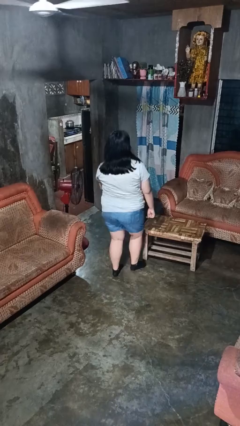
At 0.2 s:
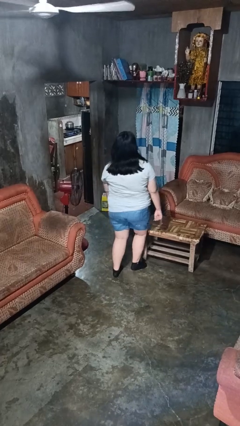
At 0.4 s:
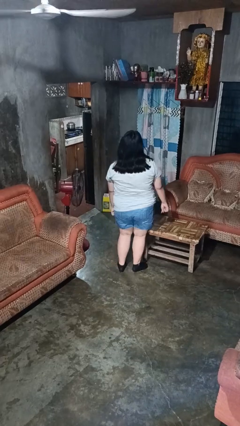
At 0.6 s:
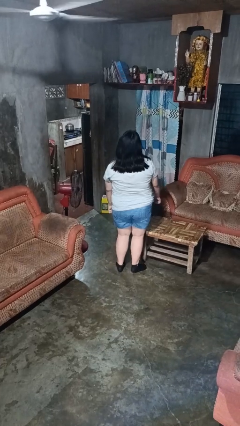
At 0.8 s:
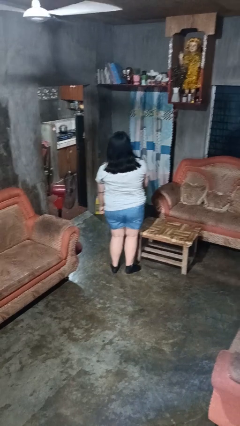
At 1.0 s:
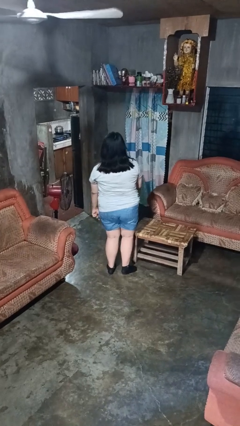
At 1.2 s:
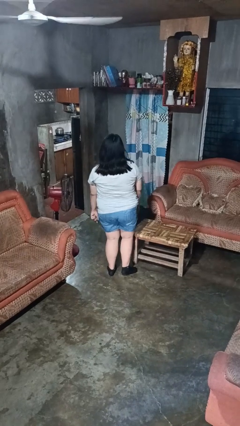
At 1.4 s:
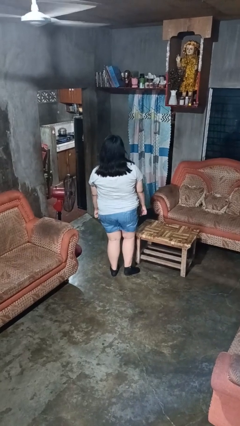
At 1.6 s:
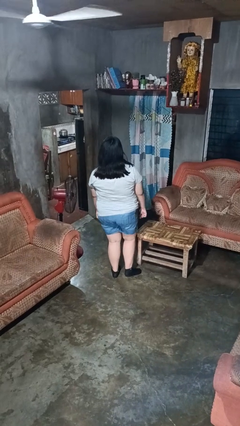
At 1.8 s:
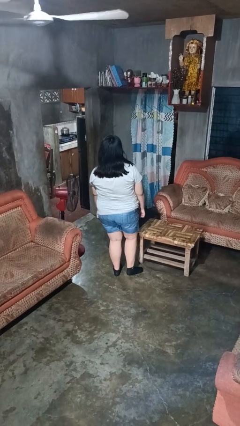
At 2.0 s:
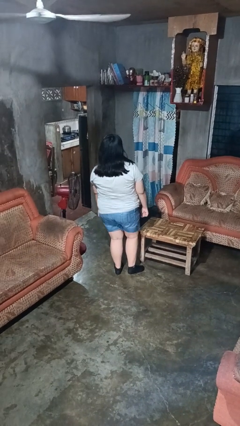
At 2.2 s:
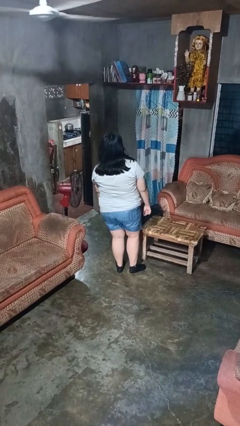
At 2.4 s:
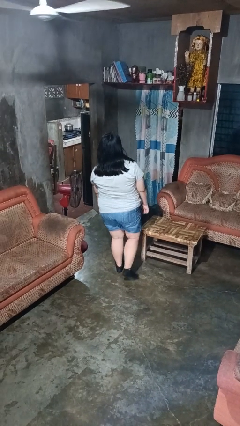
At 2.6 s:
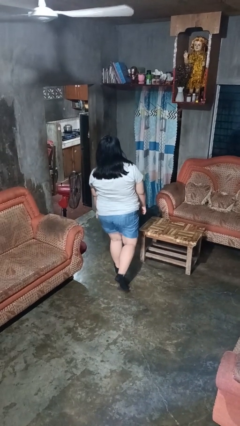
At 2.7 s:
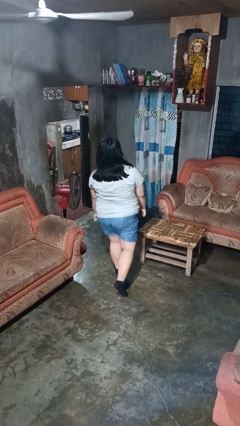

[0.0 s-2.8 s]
person bumps into table

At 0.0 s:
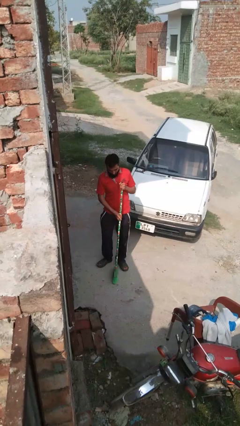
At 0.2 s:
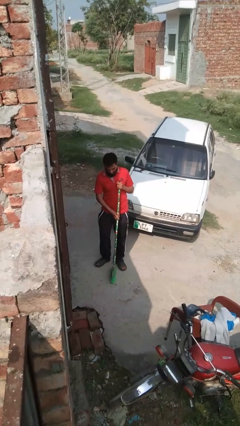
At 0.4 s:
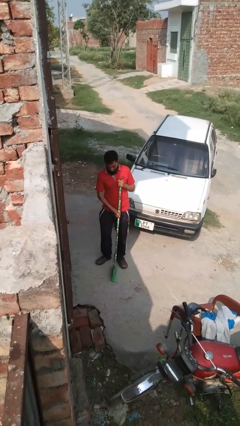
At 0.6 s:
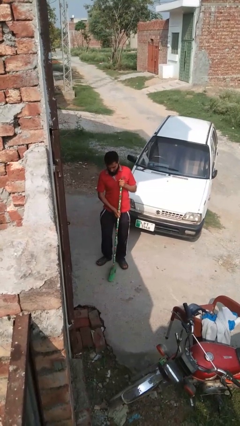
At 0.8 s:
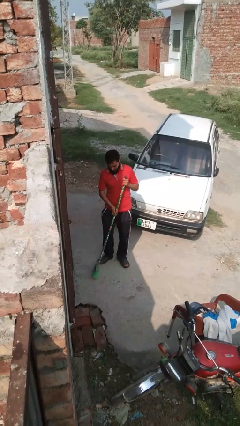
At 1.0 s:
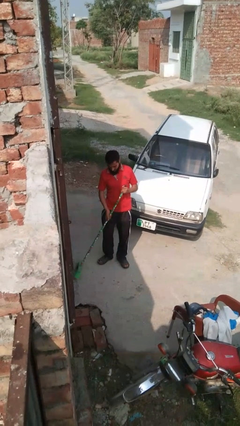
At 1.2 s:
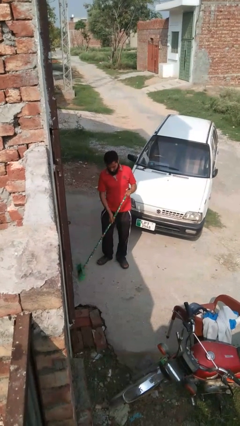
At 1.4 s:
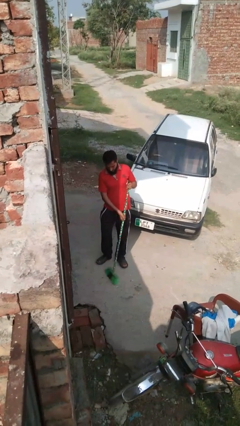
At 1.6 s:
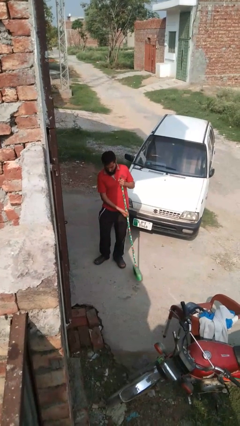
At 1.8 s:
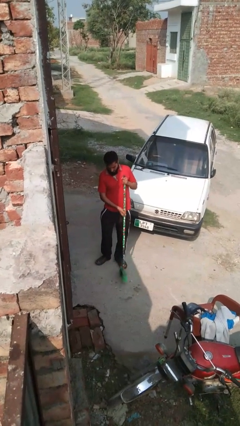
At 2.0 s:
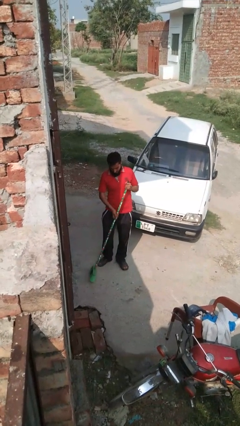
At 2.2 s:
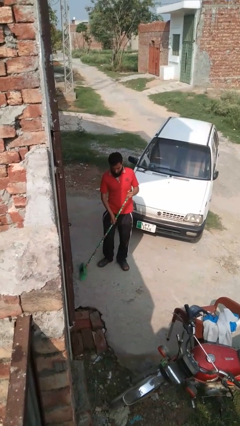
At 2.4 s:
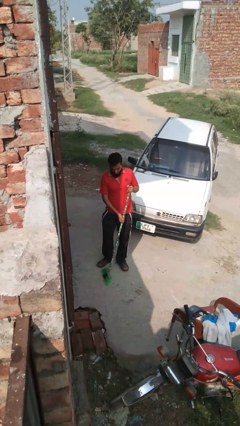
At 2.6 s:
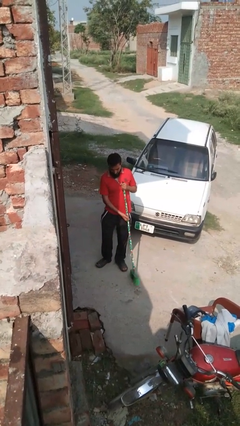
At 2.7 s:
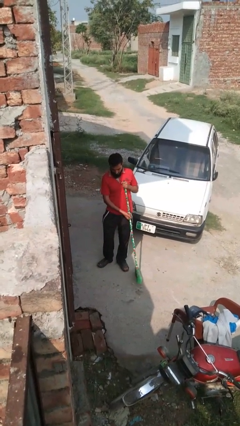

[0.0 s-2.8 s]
person sweeps floor

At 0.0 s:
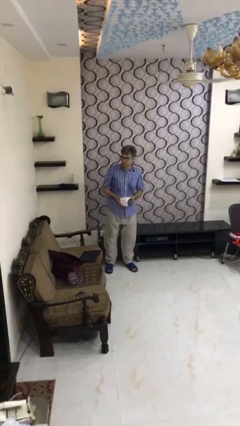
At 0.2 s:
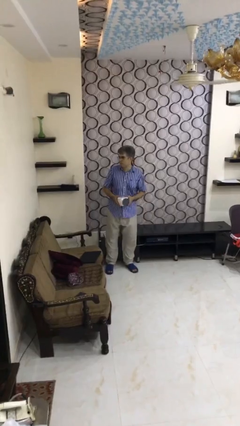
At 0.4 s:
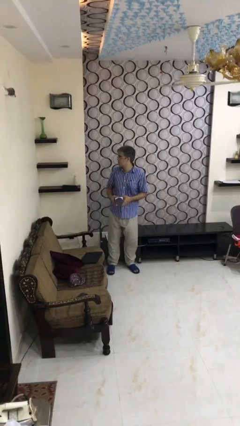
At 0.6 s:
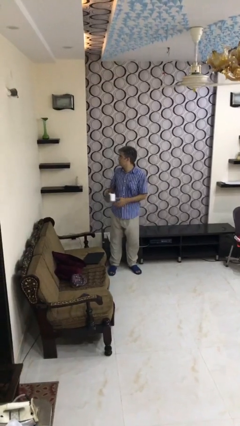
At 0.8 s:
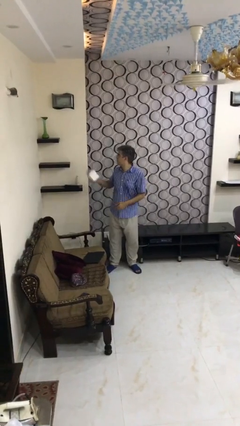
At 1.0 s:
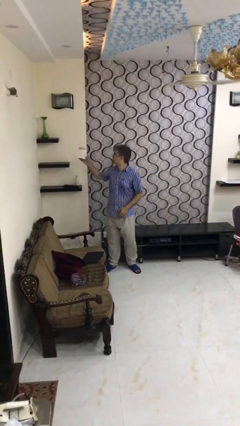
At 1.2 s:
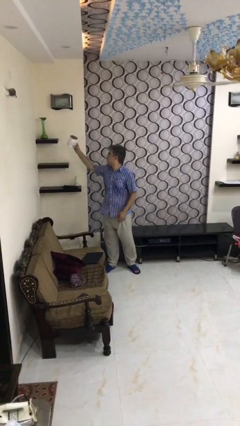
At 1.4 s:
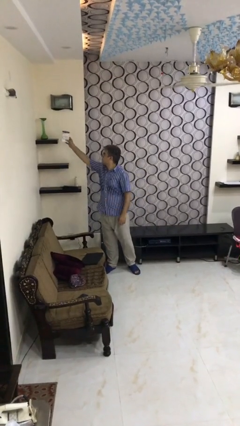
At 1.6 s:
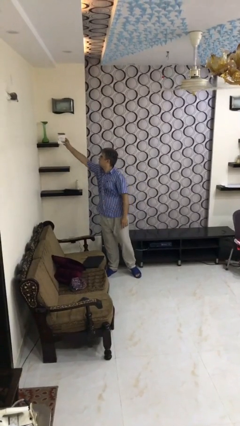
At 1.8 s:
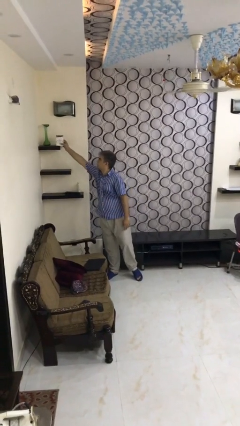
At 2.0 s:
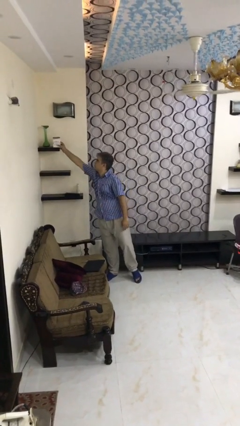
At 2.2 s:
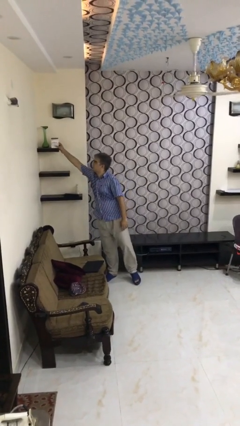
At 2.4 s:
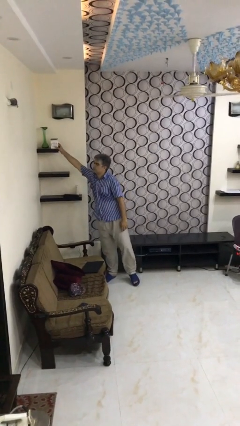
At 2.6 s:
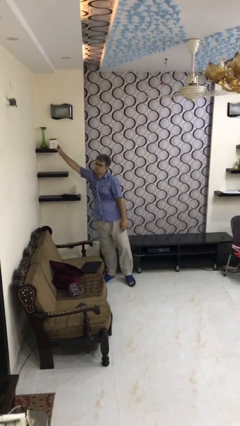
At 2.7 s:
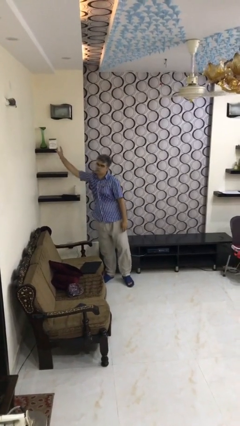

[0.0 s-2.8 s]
person puts down object on shelf

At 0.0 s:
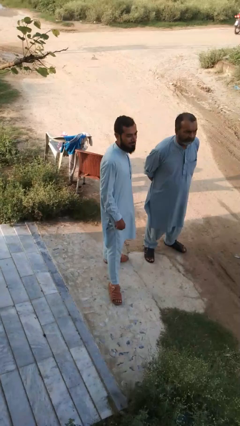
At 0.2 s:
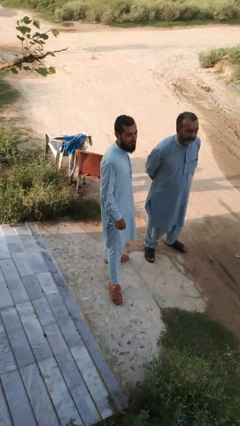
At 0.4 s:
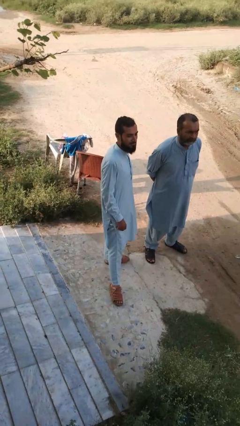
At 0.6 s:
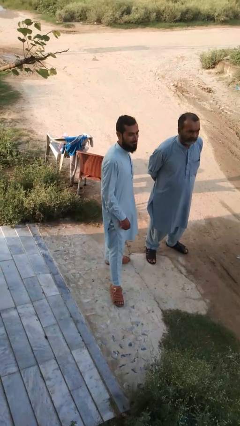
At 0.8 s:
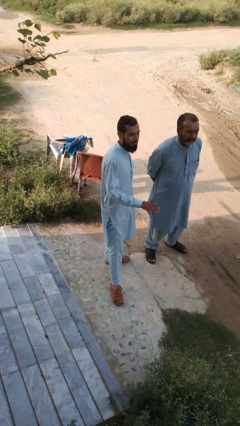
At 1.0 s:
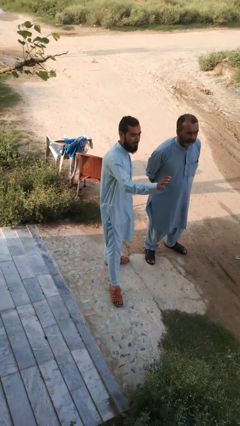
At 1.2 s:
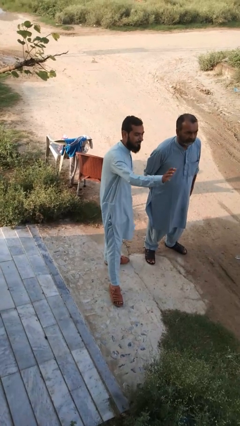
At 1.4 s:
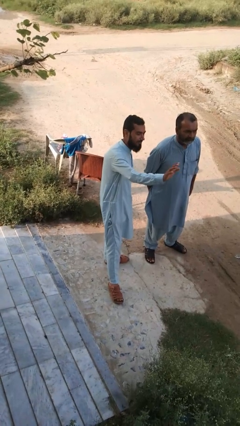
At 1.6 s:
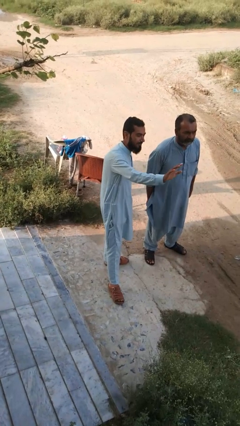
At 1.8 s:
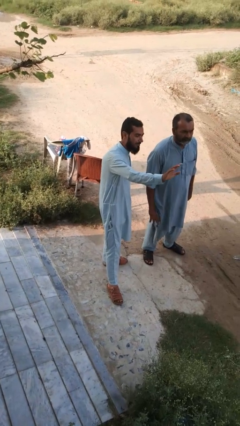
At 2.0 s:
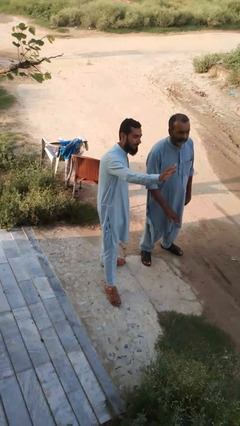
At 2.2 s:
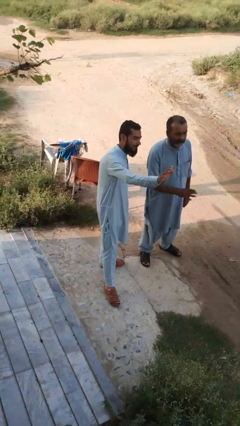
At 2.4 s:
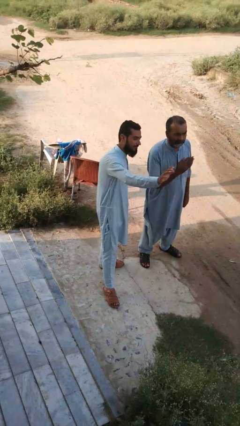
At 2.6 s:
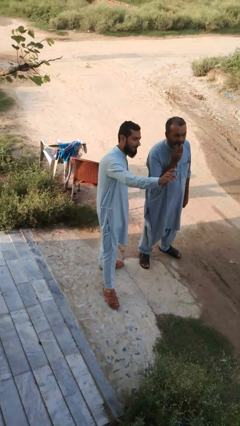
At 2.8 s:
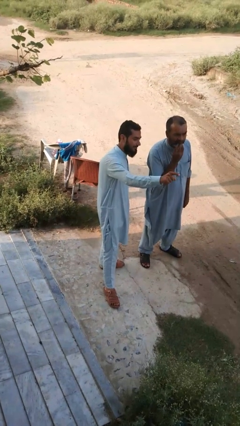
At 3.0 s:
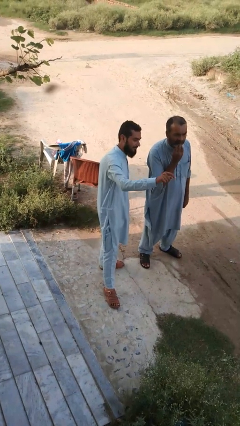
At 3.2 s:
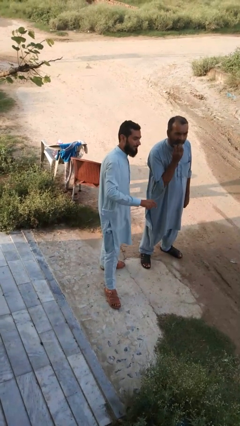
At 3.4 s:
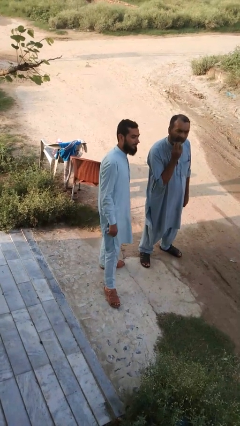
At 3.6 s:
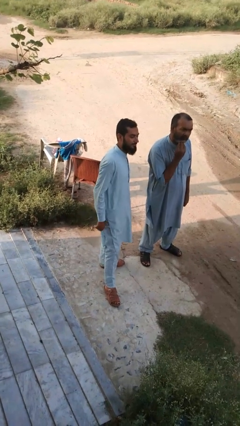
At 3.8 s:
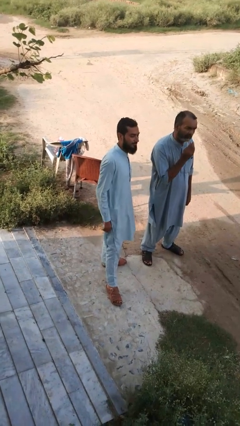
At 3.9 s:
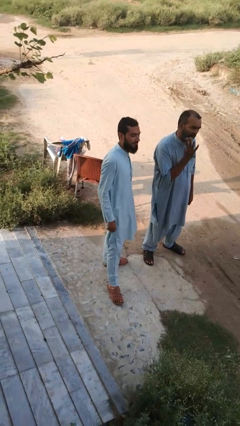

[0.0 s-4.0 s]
person waves at person

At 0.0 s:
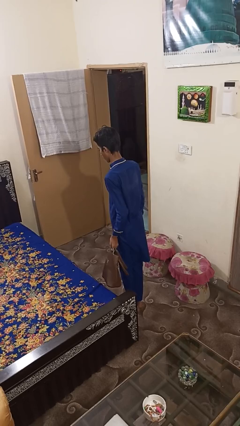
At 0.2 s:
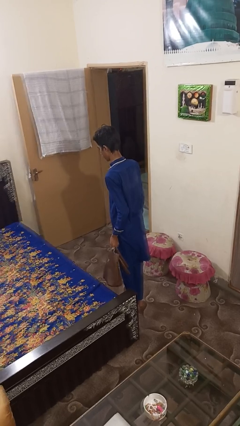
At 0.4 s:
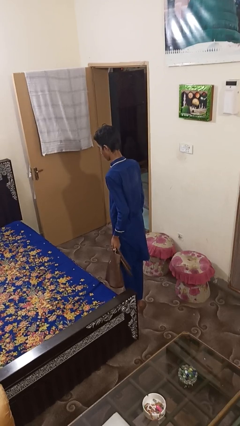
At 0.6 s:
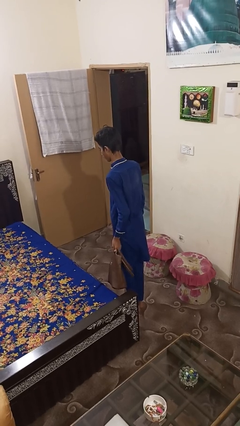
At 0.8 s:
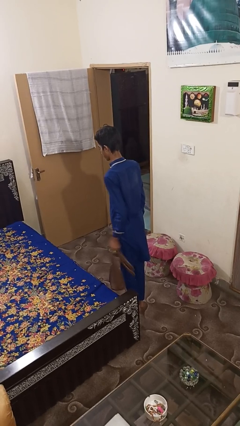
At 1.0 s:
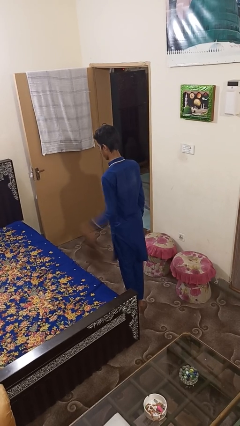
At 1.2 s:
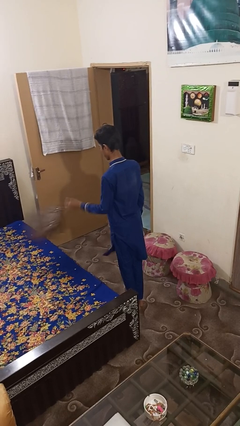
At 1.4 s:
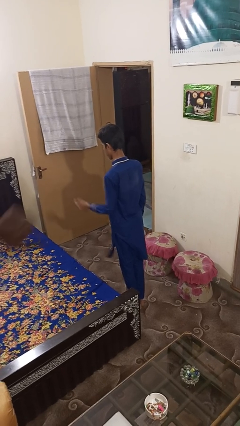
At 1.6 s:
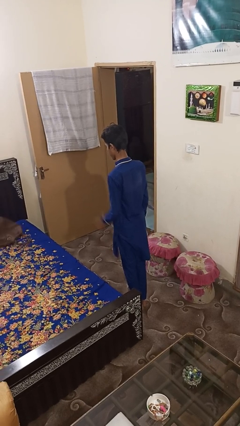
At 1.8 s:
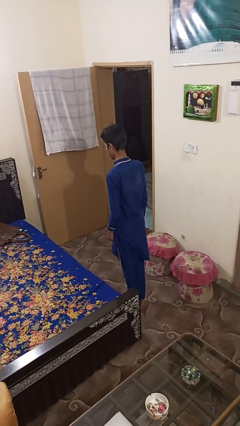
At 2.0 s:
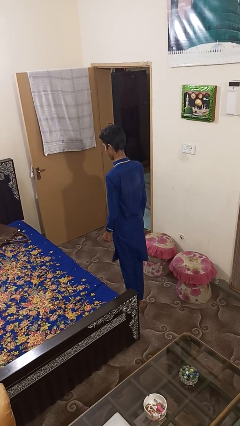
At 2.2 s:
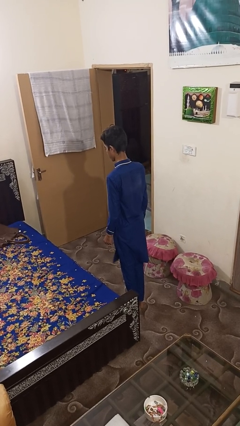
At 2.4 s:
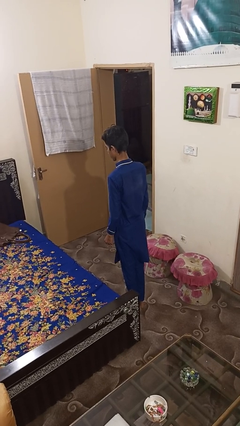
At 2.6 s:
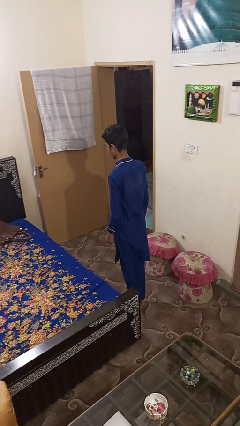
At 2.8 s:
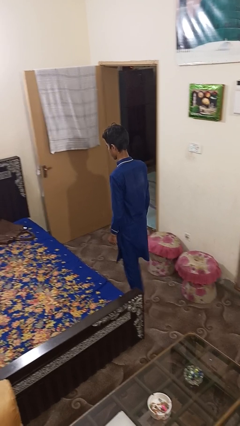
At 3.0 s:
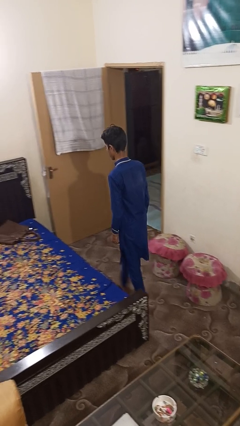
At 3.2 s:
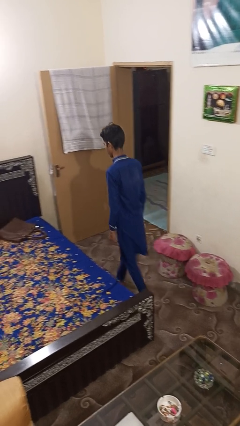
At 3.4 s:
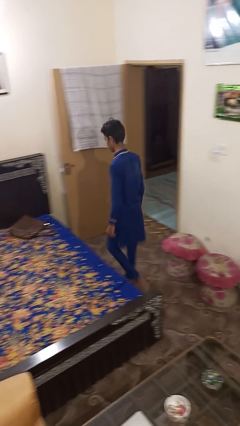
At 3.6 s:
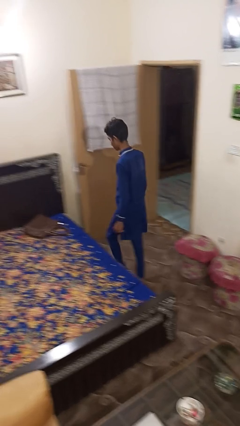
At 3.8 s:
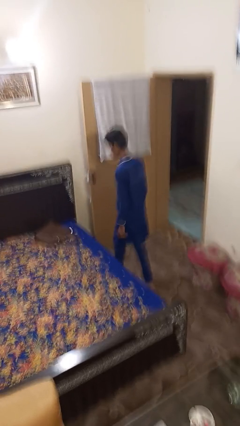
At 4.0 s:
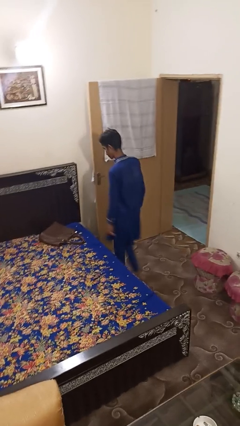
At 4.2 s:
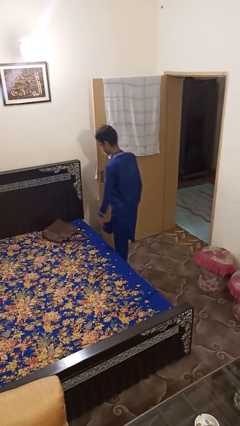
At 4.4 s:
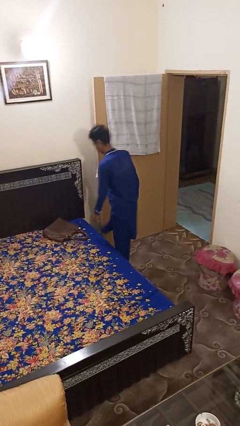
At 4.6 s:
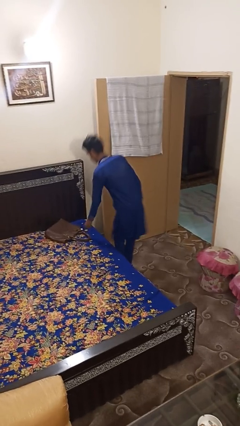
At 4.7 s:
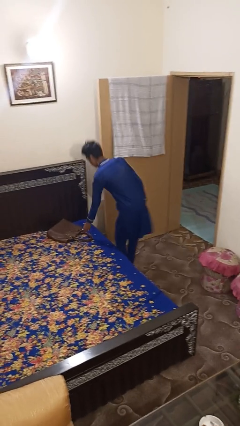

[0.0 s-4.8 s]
person throws object on bed

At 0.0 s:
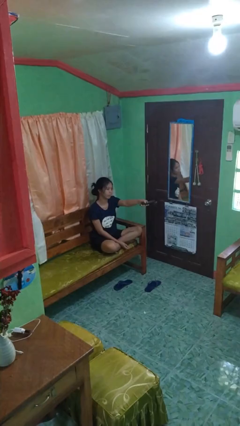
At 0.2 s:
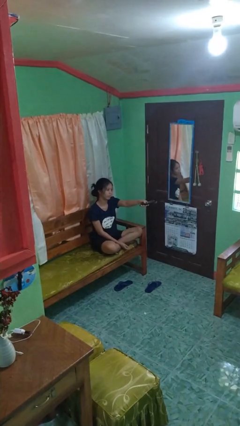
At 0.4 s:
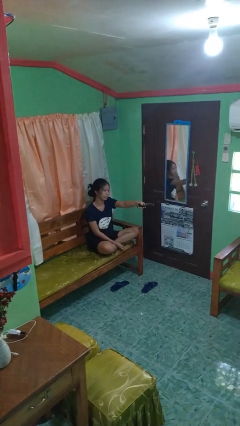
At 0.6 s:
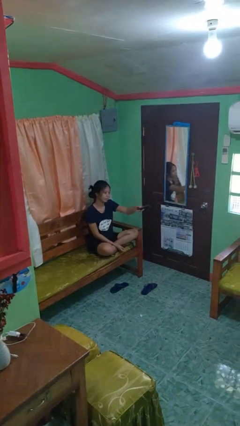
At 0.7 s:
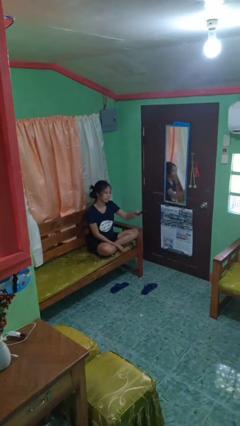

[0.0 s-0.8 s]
person uses television remote
